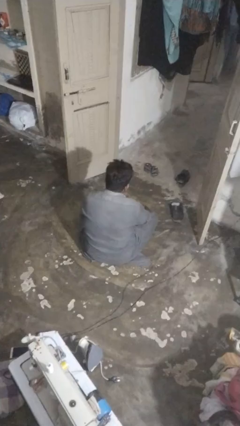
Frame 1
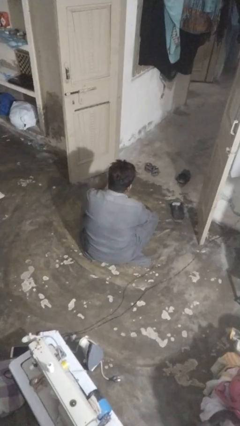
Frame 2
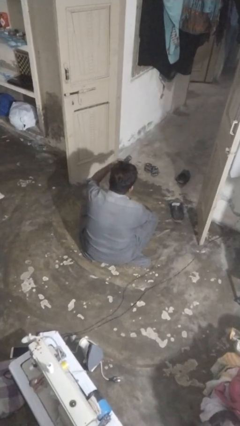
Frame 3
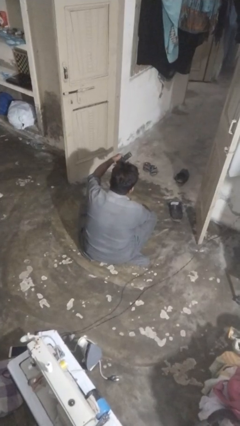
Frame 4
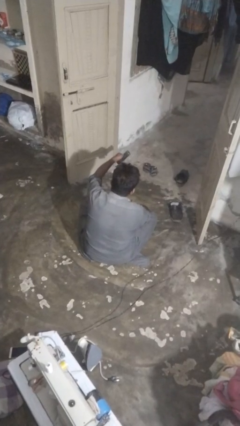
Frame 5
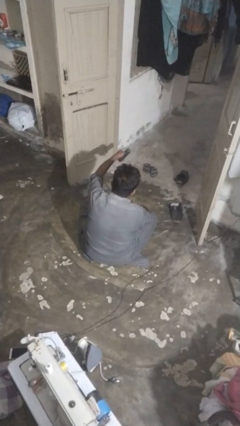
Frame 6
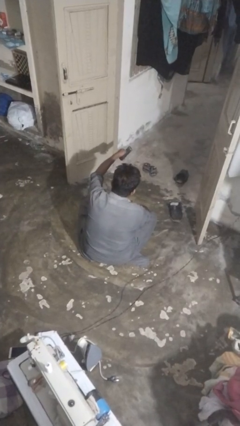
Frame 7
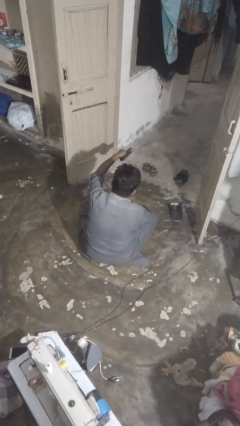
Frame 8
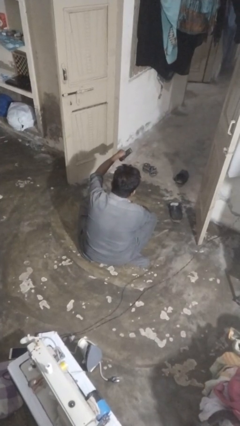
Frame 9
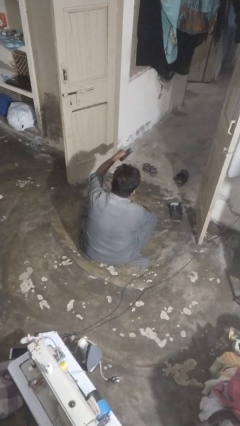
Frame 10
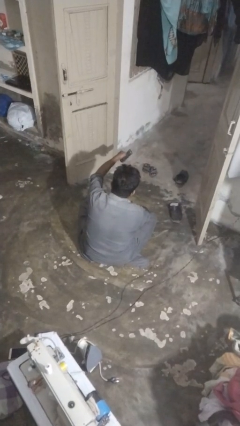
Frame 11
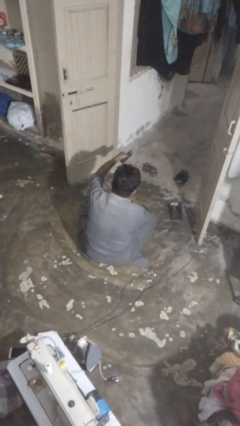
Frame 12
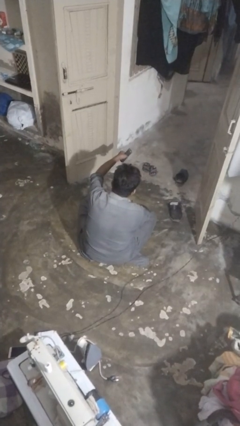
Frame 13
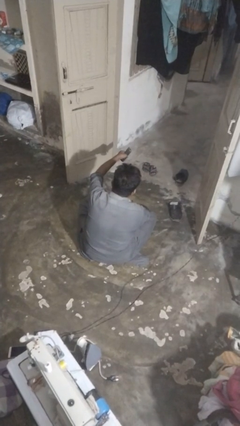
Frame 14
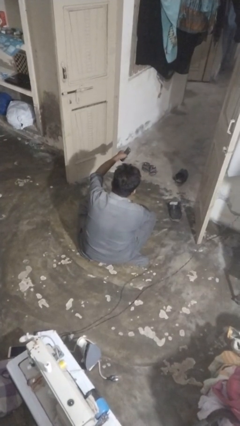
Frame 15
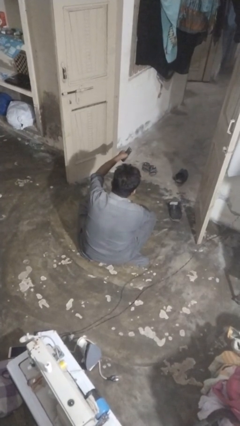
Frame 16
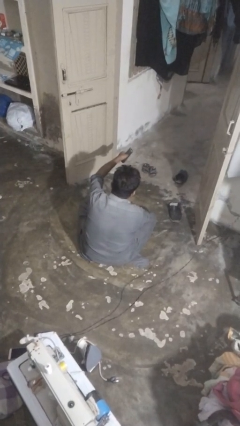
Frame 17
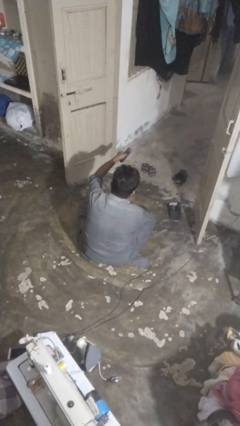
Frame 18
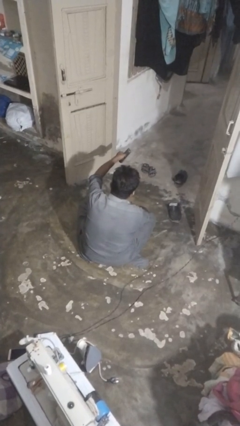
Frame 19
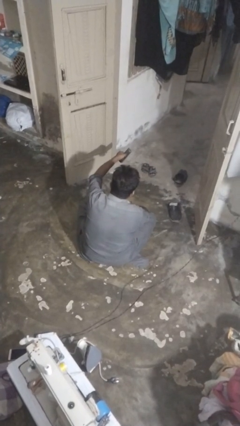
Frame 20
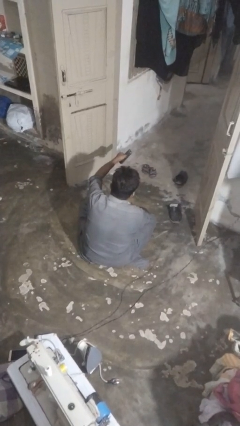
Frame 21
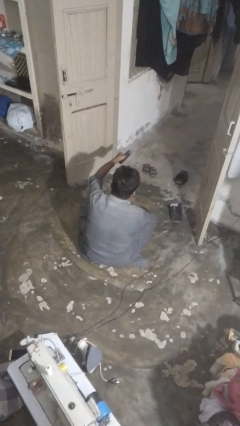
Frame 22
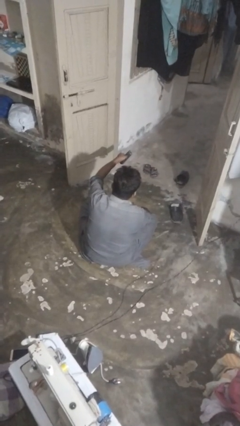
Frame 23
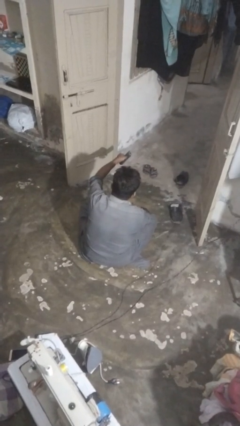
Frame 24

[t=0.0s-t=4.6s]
person uses television remote

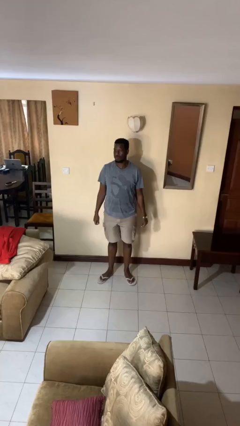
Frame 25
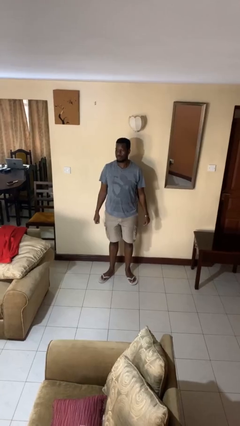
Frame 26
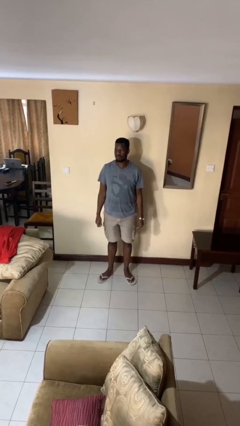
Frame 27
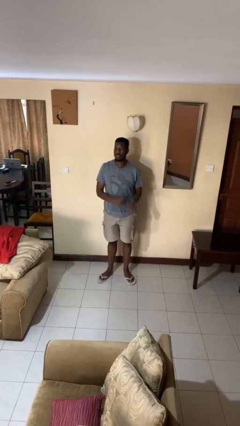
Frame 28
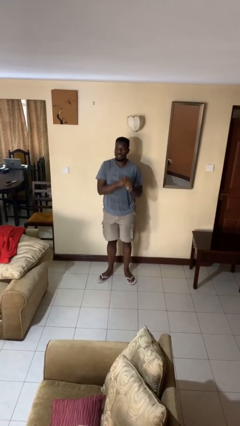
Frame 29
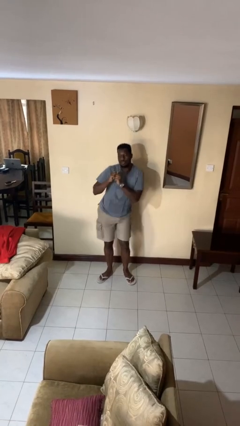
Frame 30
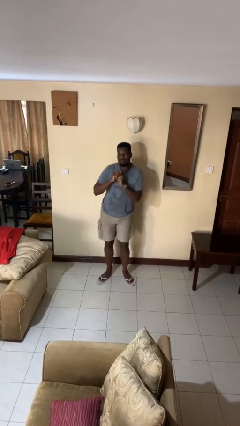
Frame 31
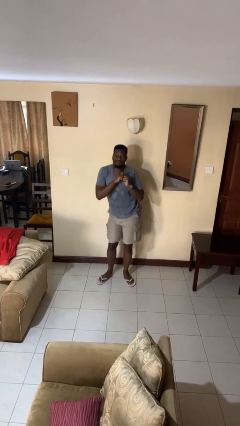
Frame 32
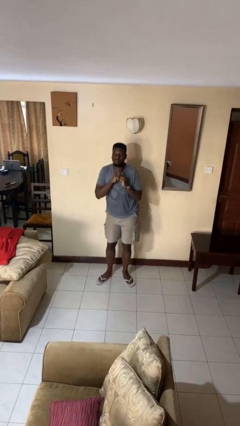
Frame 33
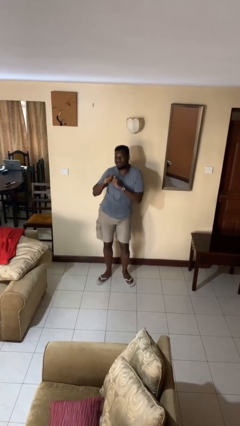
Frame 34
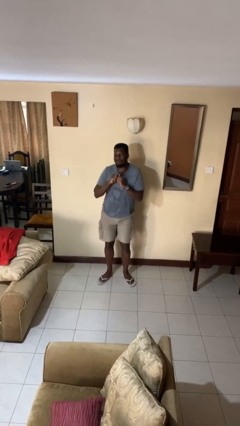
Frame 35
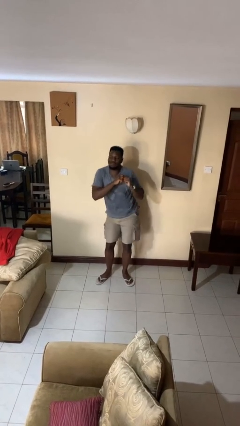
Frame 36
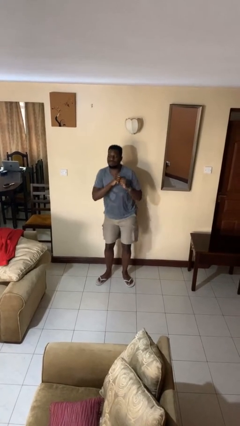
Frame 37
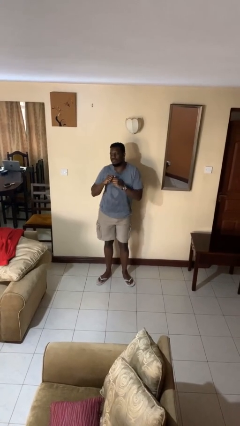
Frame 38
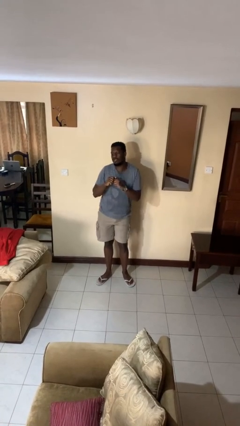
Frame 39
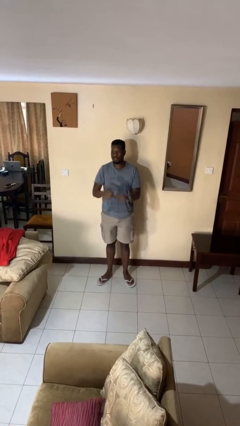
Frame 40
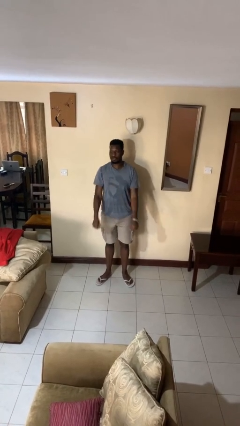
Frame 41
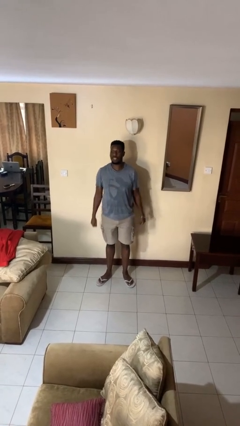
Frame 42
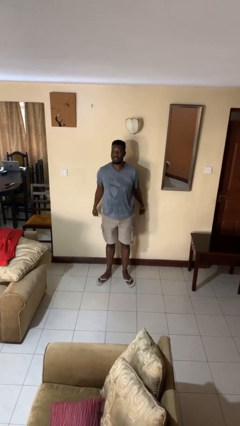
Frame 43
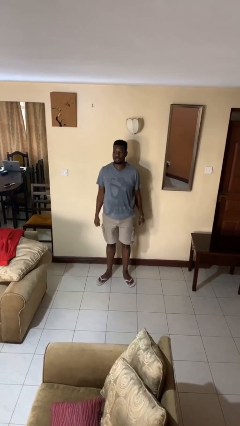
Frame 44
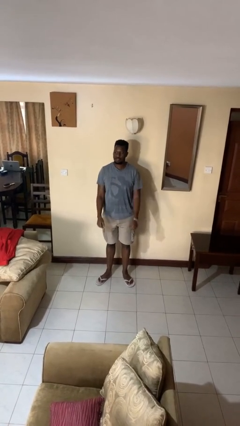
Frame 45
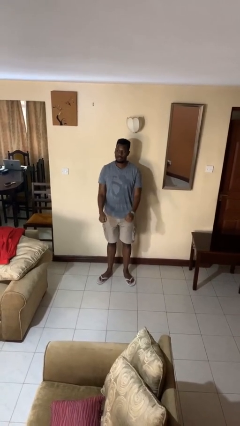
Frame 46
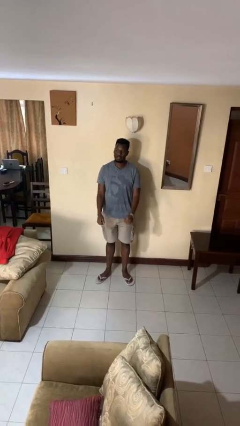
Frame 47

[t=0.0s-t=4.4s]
person wiggles hips

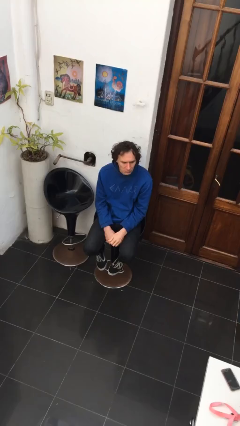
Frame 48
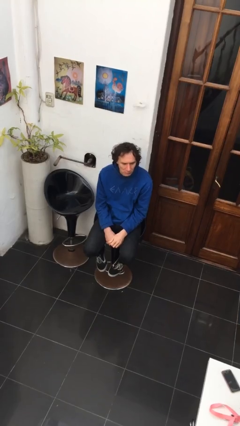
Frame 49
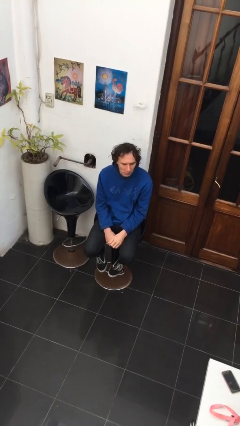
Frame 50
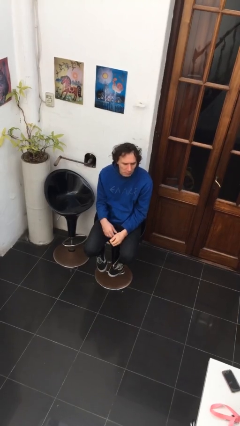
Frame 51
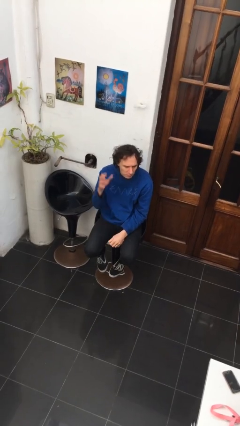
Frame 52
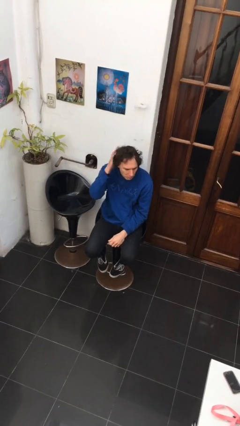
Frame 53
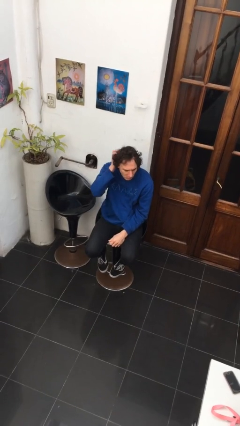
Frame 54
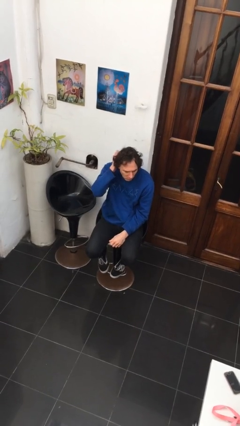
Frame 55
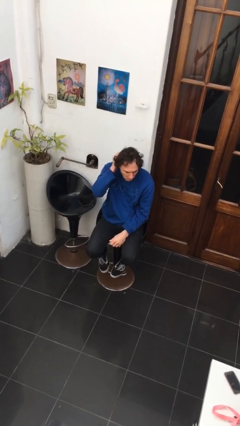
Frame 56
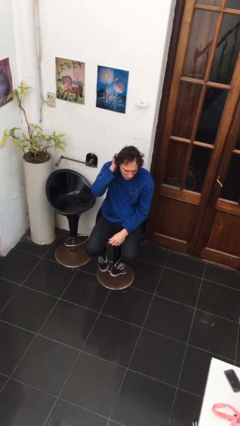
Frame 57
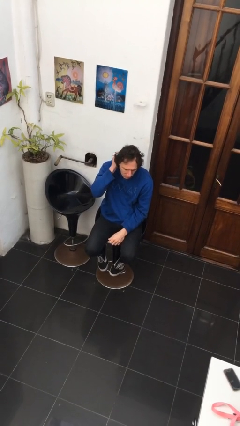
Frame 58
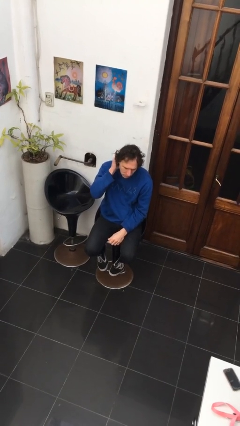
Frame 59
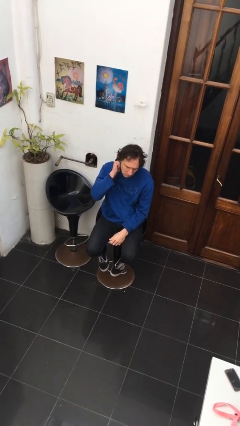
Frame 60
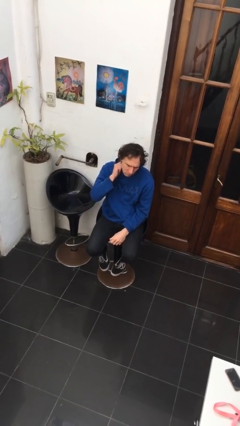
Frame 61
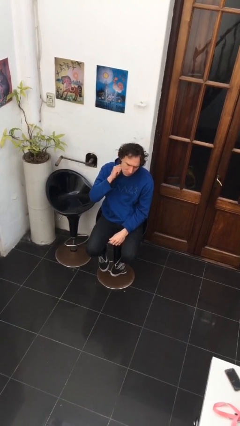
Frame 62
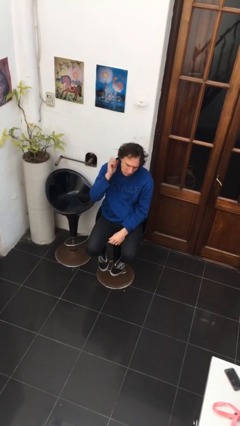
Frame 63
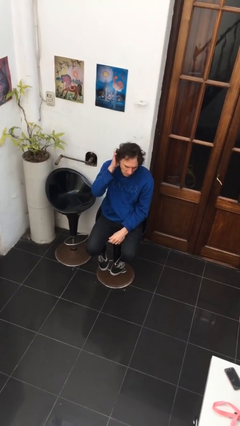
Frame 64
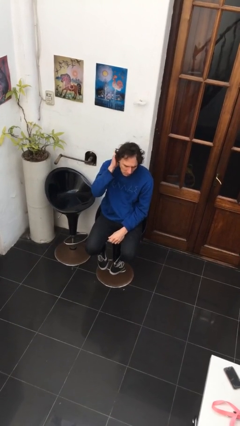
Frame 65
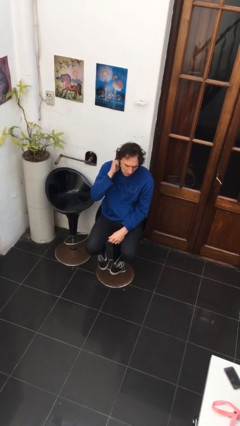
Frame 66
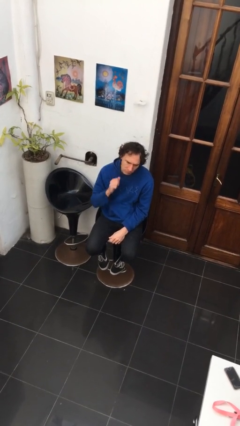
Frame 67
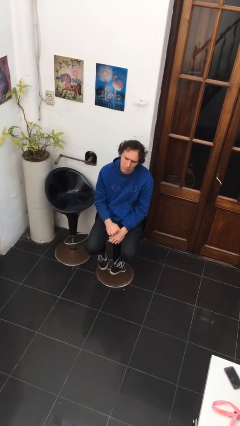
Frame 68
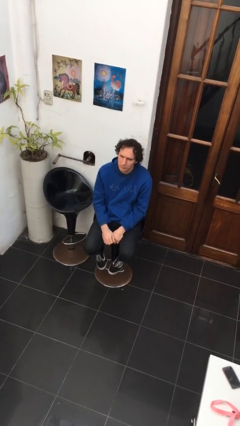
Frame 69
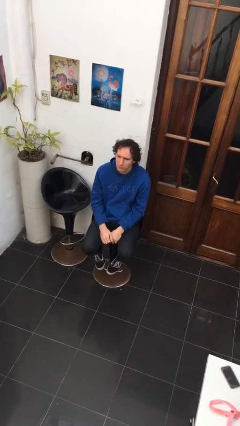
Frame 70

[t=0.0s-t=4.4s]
person strokes hair

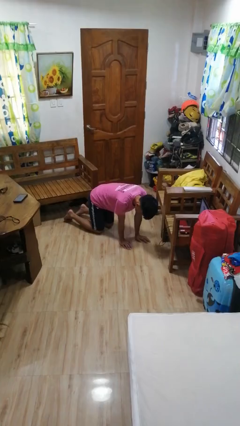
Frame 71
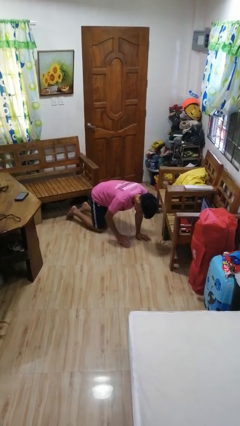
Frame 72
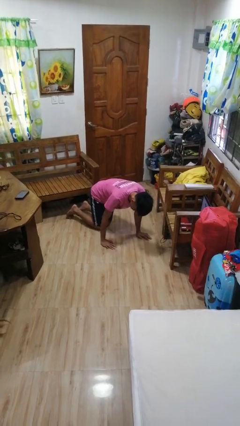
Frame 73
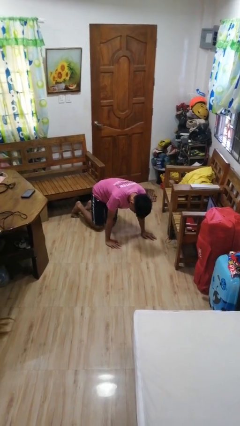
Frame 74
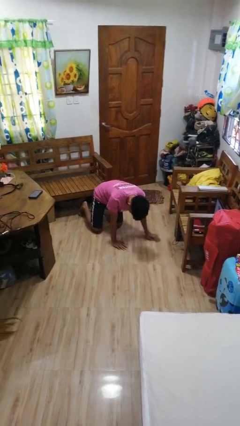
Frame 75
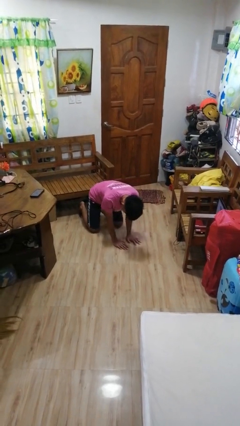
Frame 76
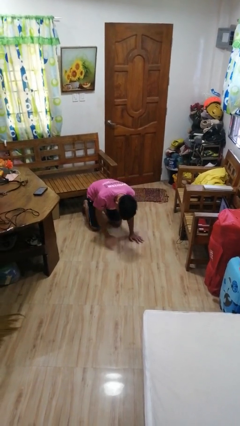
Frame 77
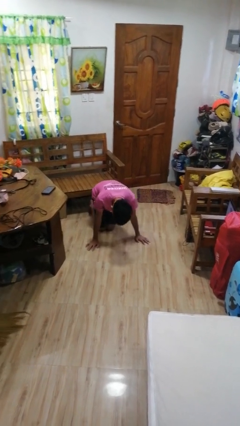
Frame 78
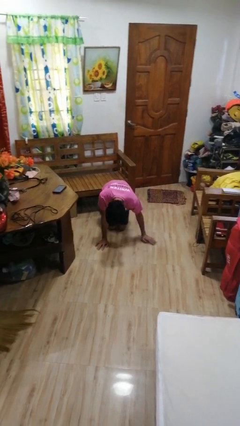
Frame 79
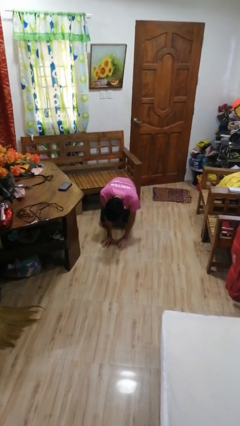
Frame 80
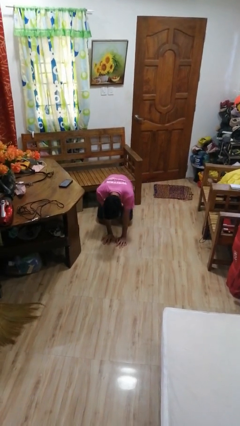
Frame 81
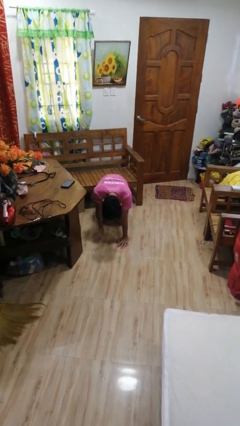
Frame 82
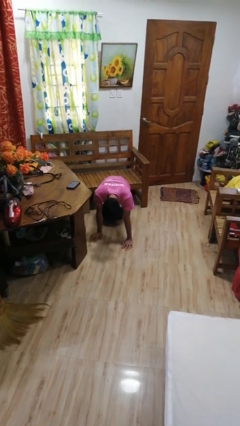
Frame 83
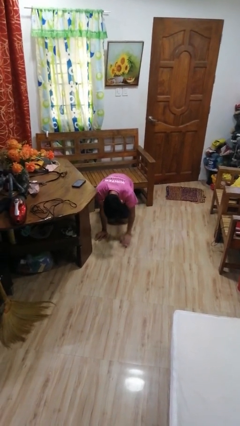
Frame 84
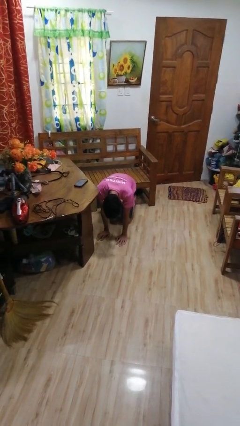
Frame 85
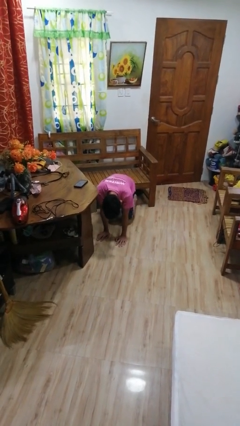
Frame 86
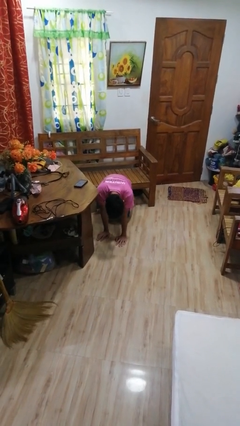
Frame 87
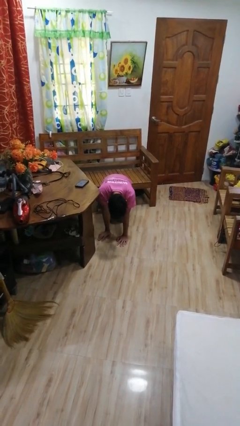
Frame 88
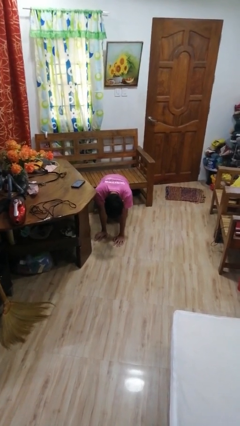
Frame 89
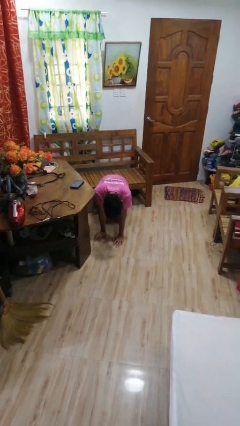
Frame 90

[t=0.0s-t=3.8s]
person crawls

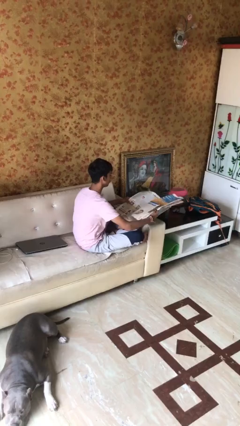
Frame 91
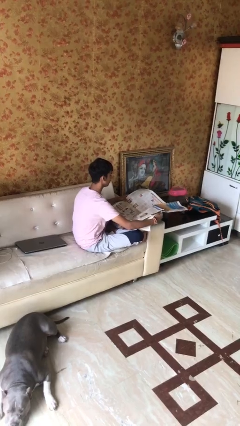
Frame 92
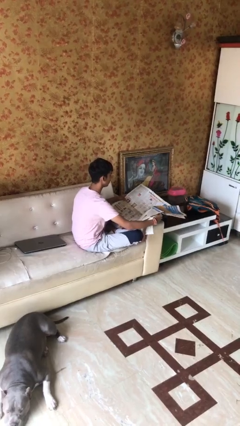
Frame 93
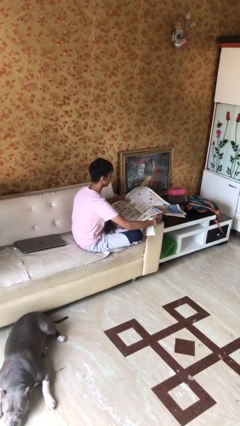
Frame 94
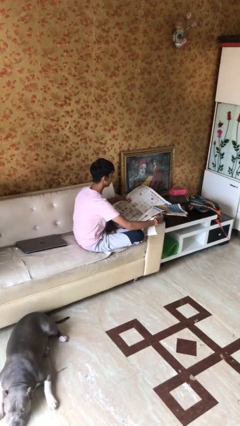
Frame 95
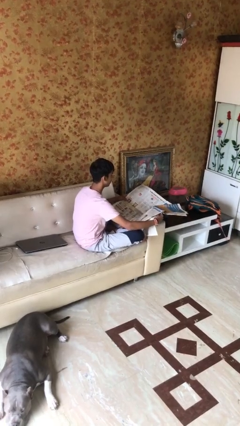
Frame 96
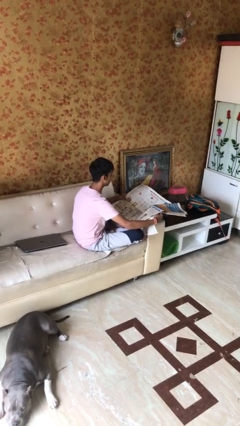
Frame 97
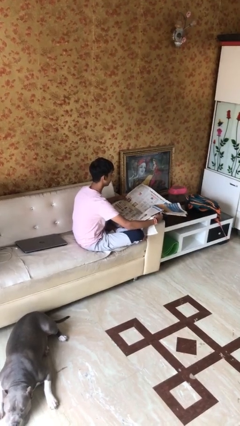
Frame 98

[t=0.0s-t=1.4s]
person reads newspaper
